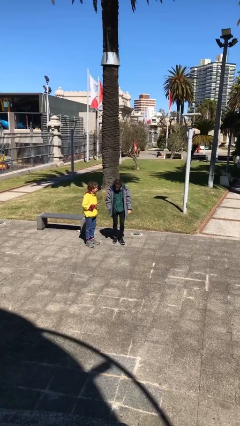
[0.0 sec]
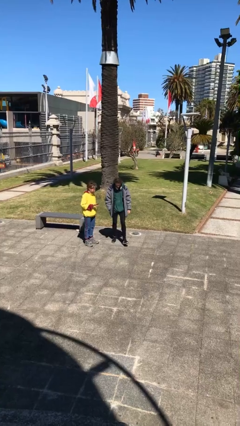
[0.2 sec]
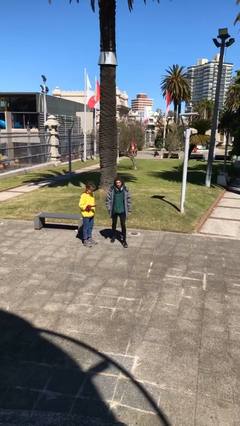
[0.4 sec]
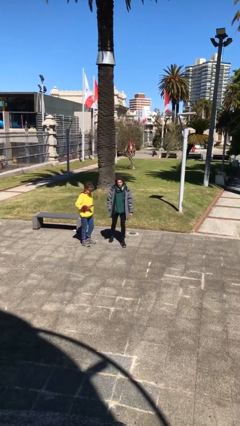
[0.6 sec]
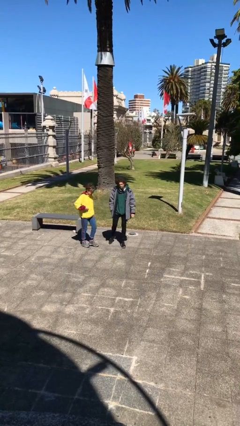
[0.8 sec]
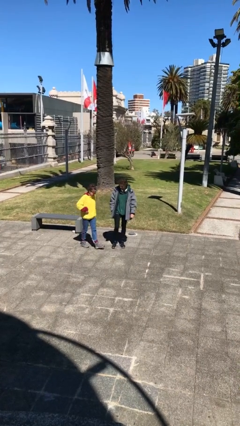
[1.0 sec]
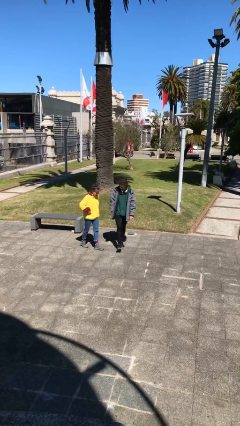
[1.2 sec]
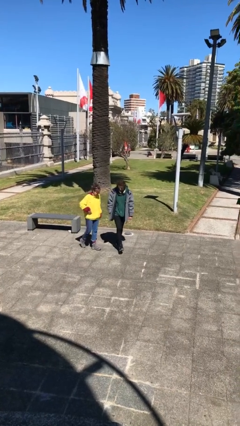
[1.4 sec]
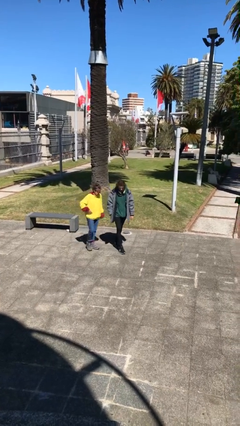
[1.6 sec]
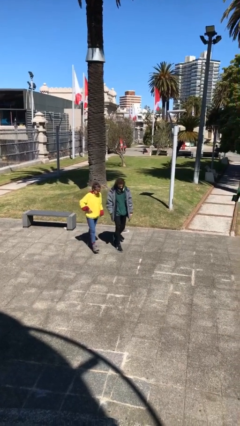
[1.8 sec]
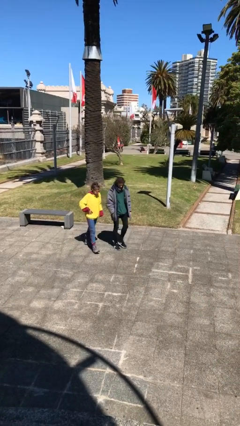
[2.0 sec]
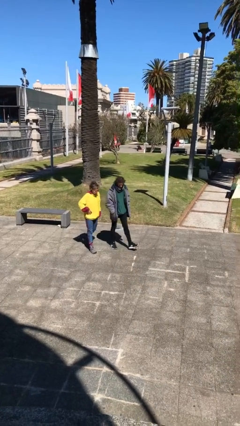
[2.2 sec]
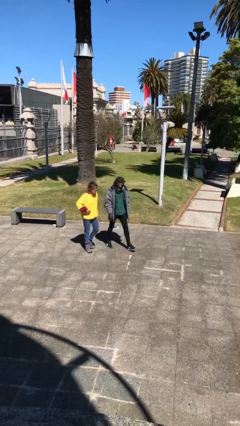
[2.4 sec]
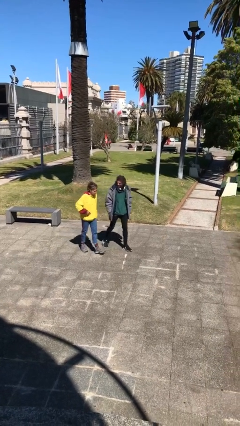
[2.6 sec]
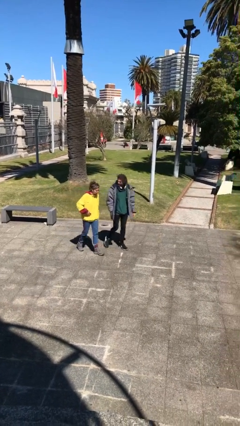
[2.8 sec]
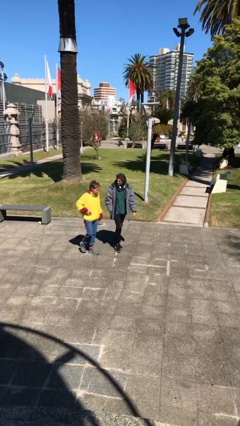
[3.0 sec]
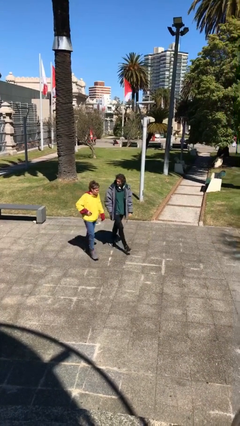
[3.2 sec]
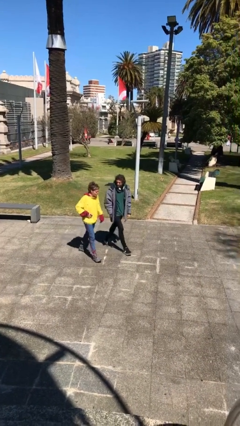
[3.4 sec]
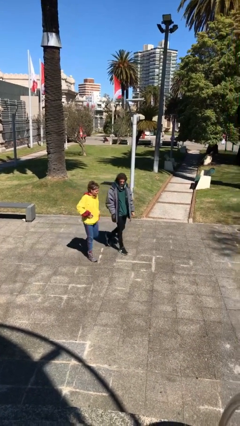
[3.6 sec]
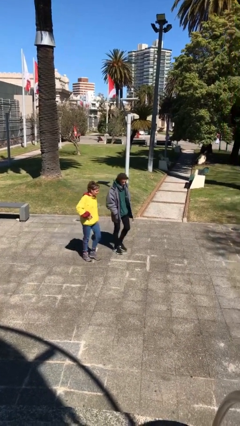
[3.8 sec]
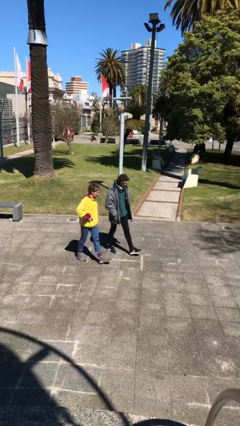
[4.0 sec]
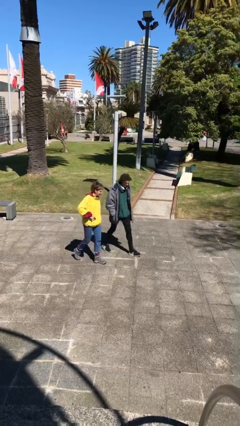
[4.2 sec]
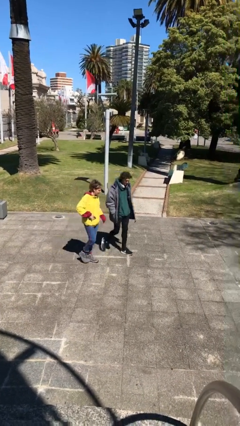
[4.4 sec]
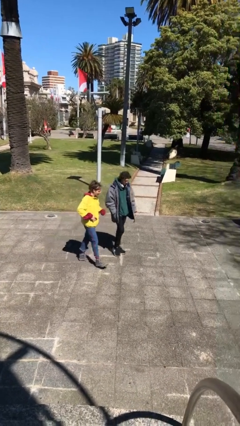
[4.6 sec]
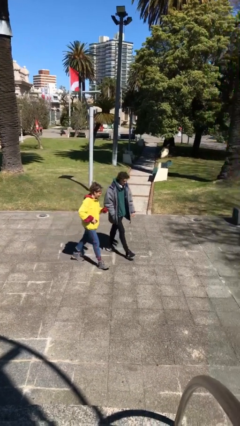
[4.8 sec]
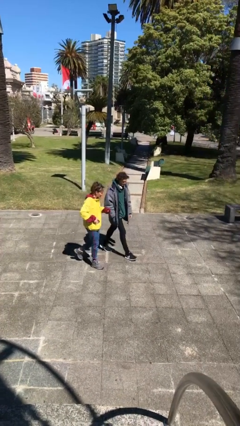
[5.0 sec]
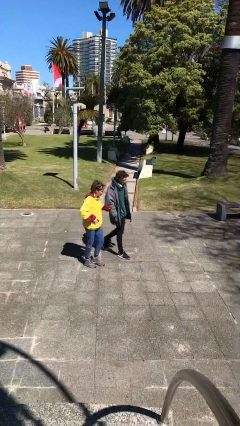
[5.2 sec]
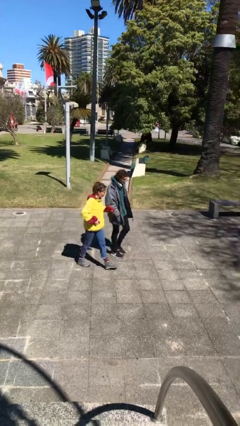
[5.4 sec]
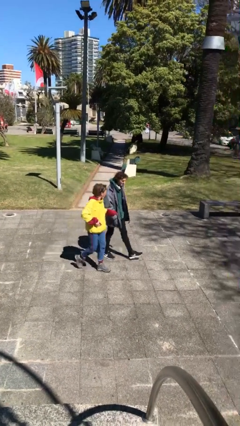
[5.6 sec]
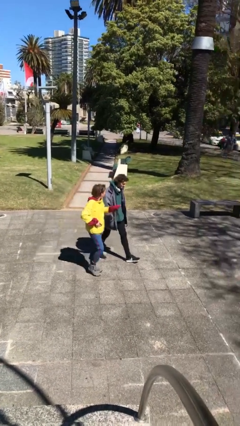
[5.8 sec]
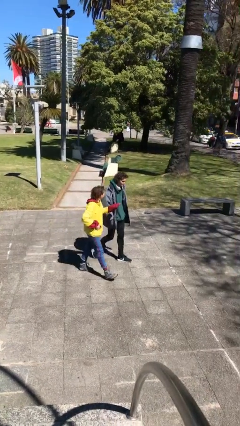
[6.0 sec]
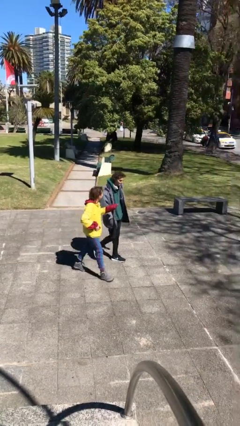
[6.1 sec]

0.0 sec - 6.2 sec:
person talks to person

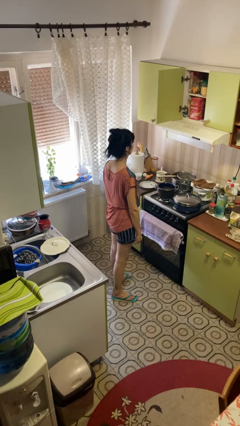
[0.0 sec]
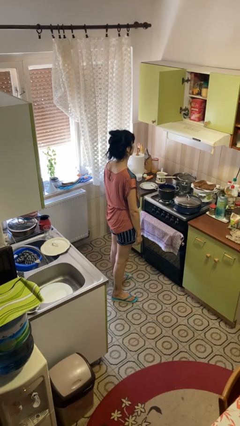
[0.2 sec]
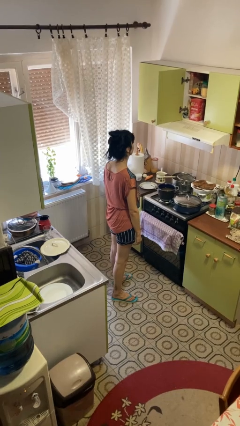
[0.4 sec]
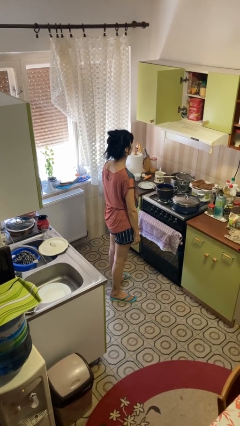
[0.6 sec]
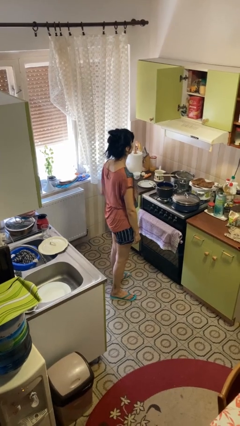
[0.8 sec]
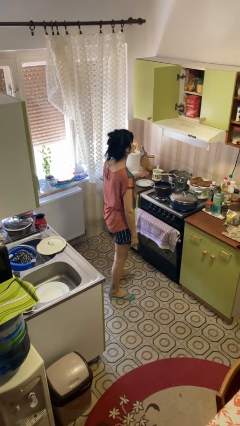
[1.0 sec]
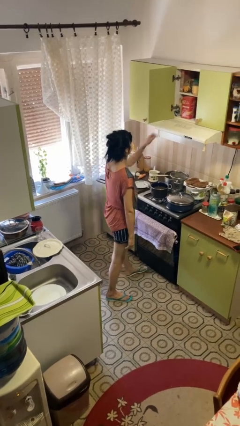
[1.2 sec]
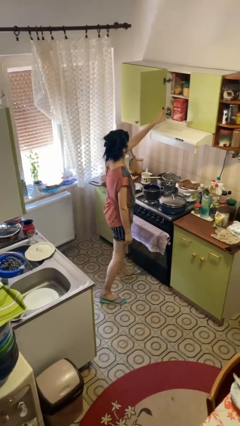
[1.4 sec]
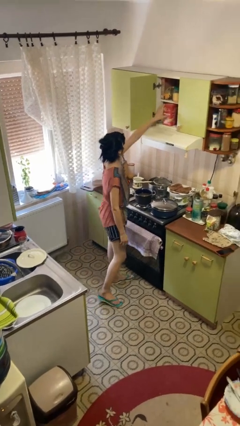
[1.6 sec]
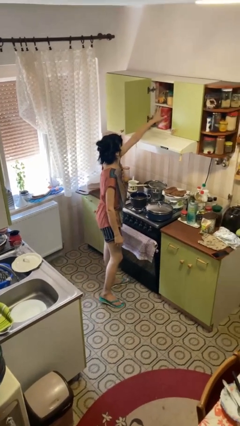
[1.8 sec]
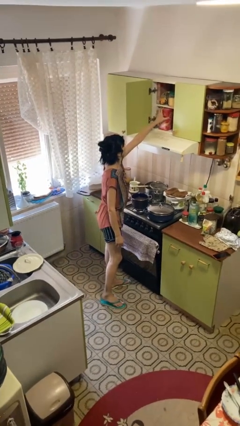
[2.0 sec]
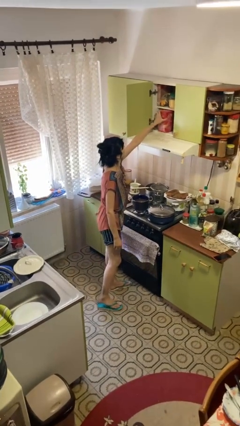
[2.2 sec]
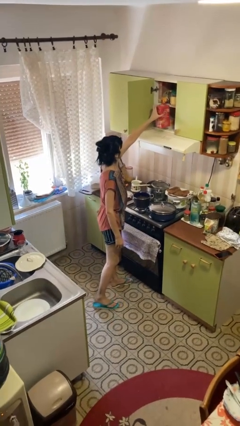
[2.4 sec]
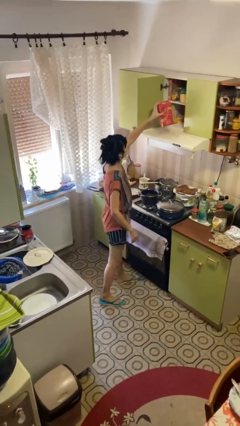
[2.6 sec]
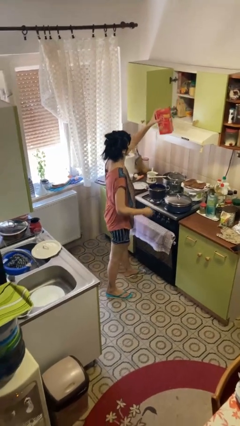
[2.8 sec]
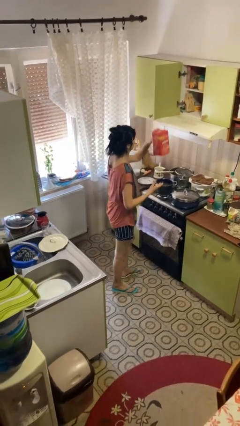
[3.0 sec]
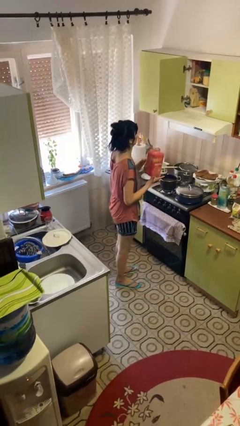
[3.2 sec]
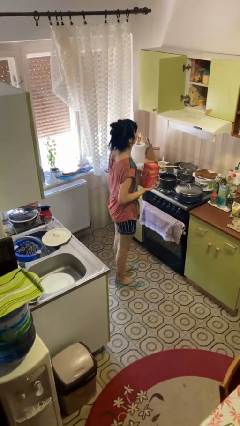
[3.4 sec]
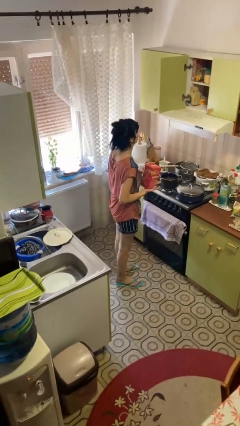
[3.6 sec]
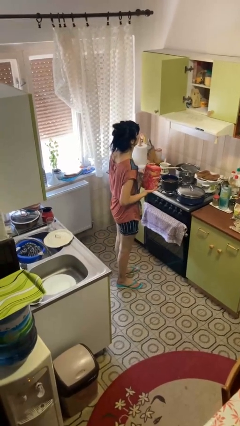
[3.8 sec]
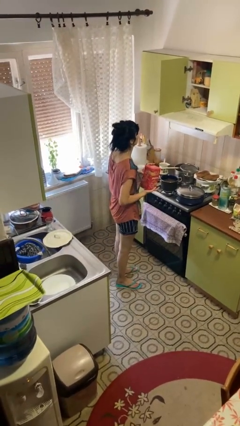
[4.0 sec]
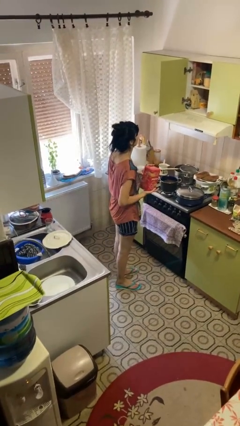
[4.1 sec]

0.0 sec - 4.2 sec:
person picks up object from cabinet

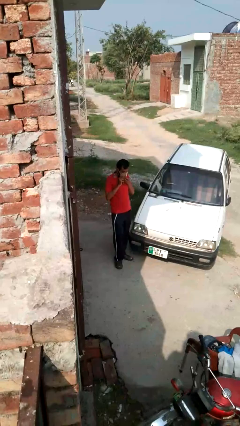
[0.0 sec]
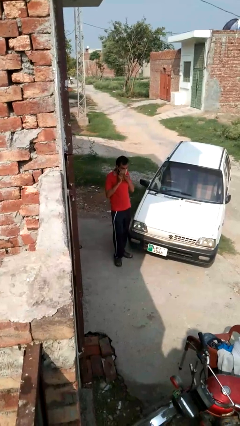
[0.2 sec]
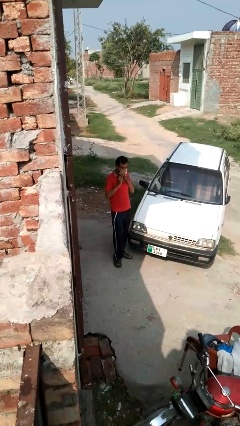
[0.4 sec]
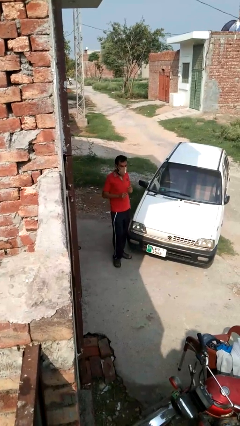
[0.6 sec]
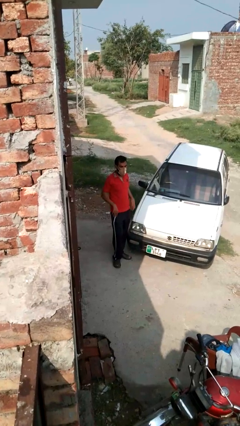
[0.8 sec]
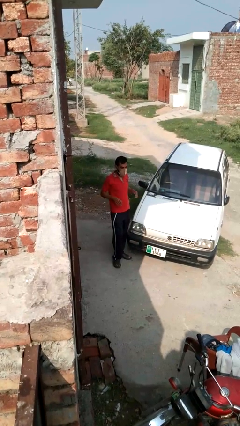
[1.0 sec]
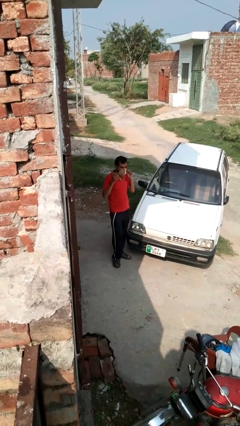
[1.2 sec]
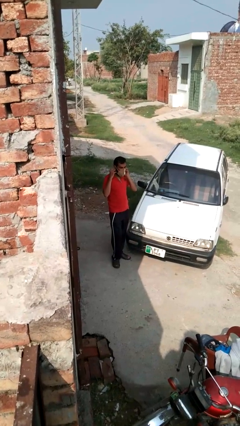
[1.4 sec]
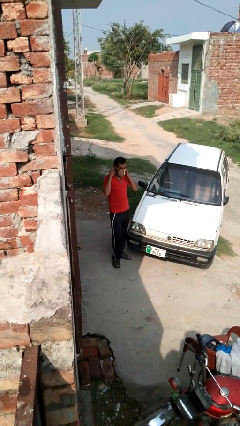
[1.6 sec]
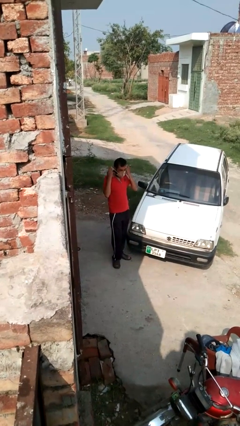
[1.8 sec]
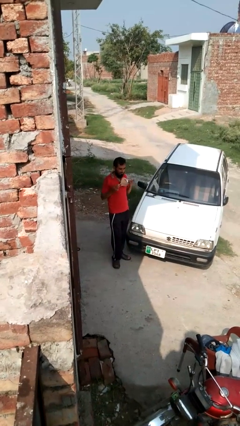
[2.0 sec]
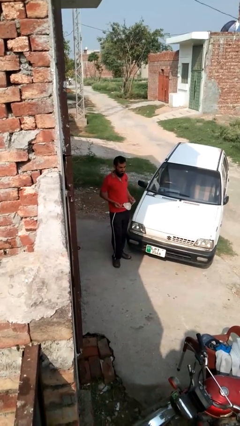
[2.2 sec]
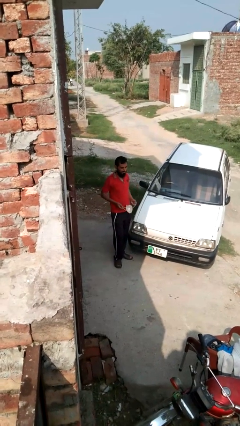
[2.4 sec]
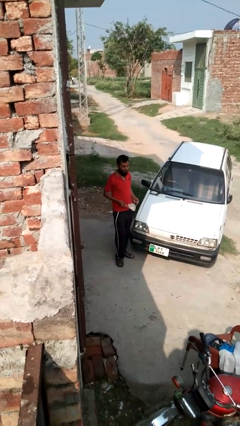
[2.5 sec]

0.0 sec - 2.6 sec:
person takes off facemask

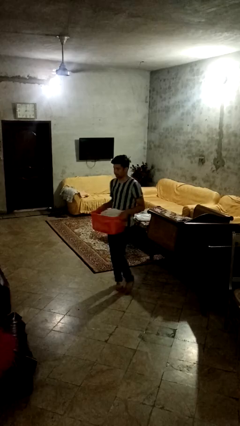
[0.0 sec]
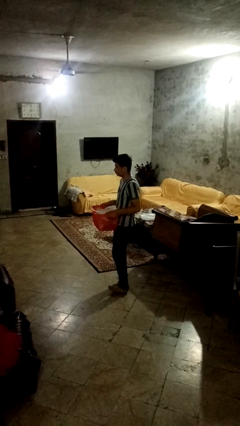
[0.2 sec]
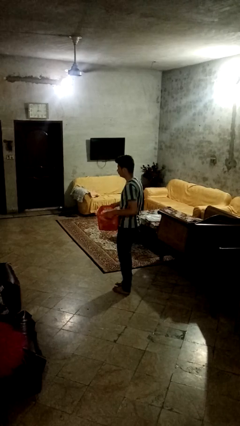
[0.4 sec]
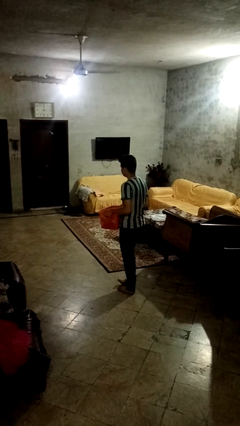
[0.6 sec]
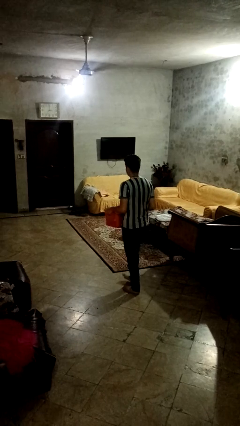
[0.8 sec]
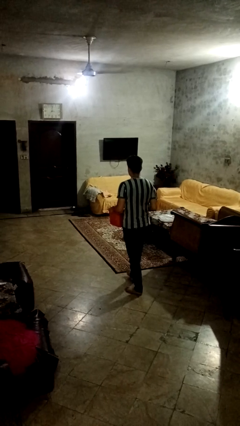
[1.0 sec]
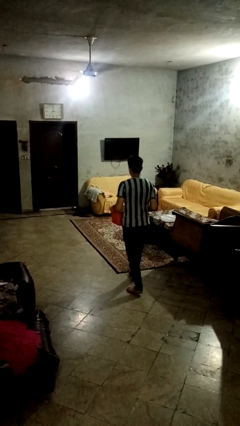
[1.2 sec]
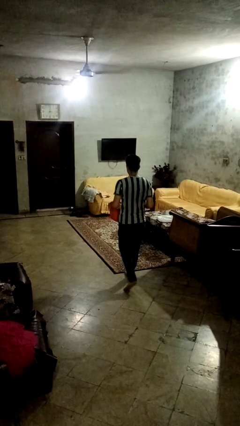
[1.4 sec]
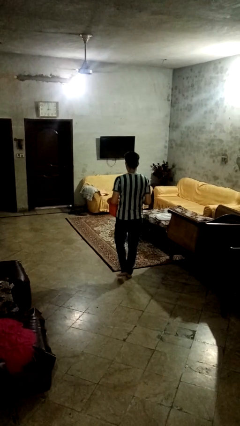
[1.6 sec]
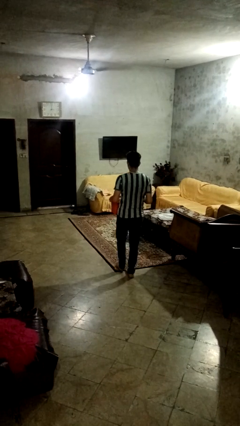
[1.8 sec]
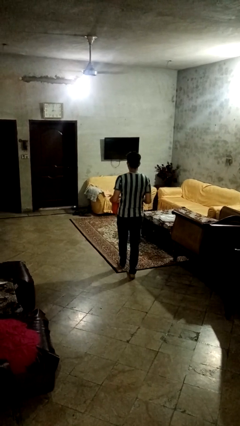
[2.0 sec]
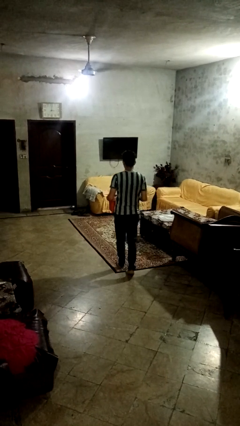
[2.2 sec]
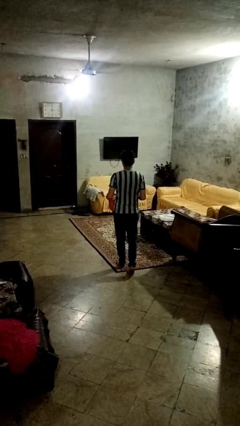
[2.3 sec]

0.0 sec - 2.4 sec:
person carries laundry basket

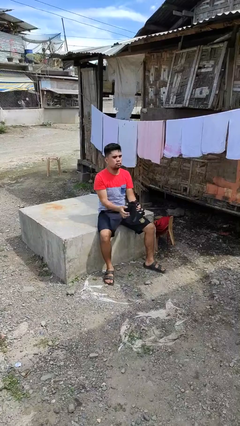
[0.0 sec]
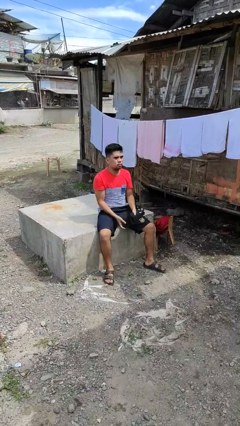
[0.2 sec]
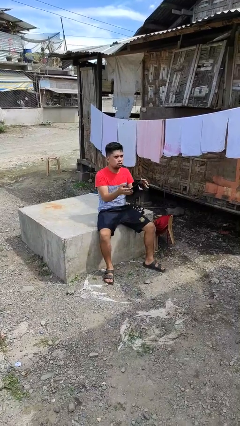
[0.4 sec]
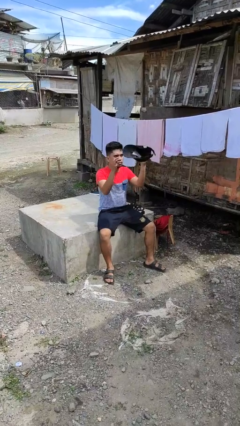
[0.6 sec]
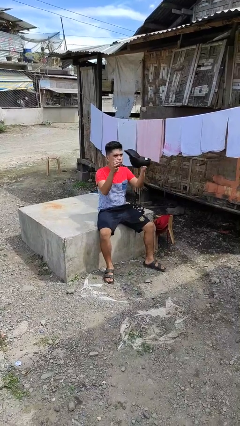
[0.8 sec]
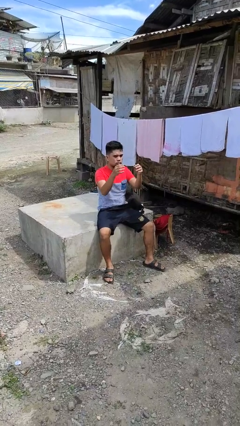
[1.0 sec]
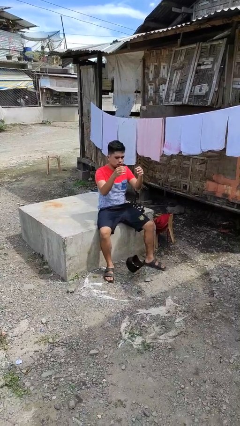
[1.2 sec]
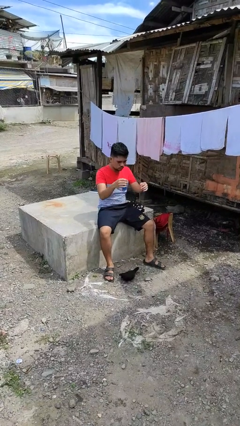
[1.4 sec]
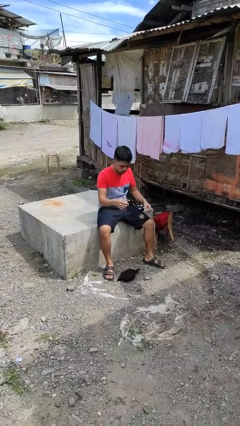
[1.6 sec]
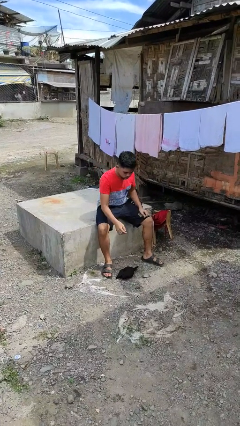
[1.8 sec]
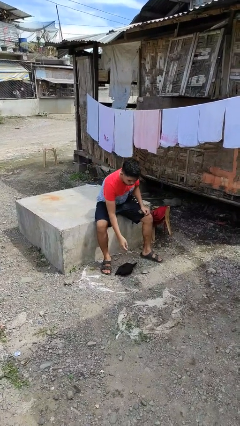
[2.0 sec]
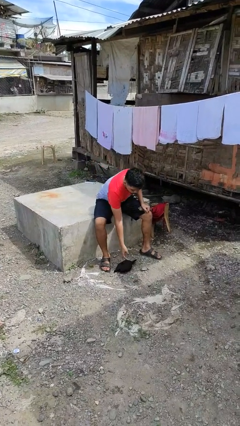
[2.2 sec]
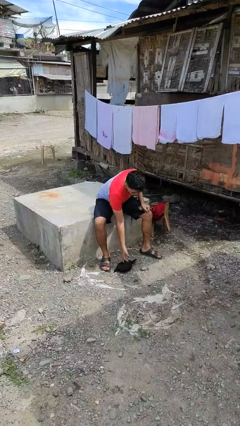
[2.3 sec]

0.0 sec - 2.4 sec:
person drops object
